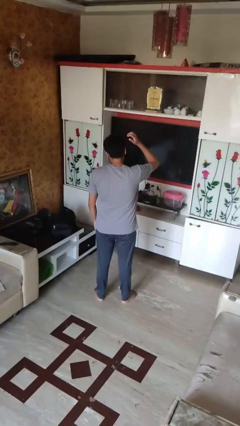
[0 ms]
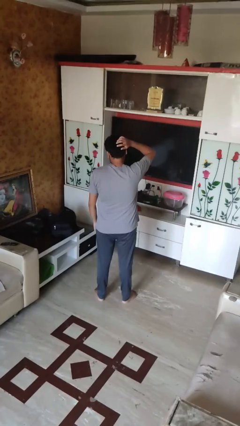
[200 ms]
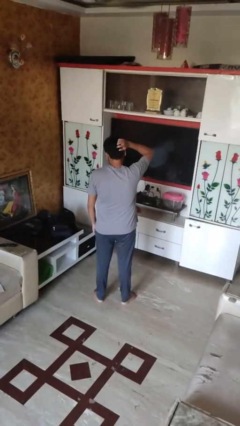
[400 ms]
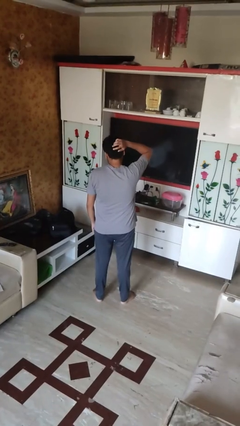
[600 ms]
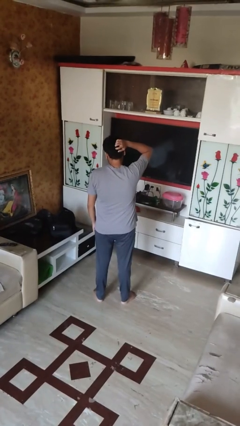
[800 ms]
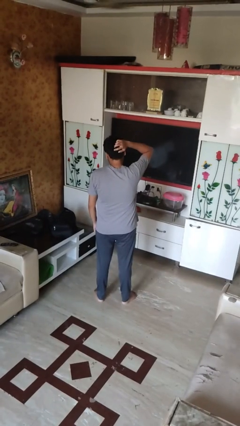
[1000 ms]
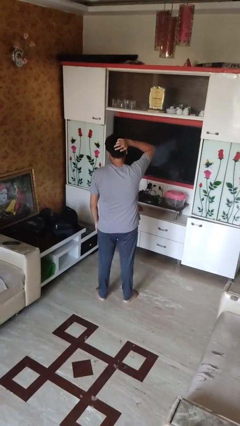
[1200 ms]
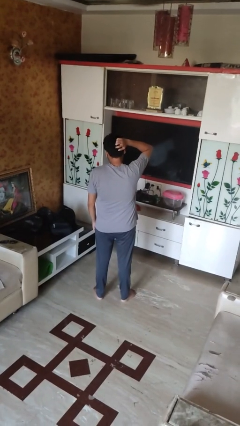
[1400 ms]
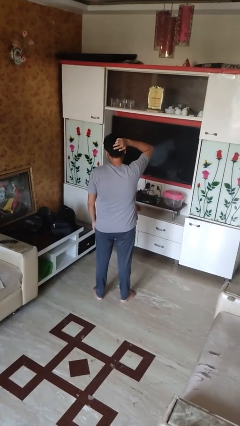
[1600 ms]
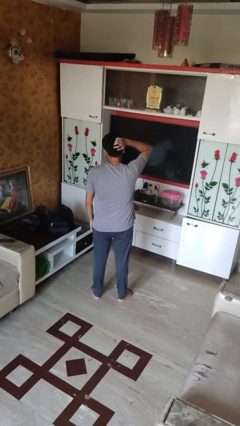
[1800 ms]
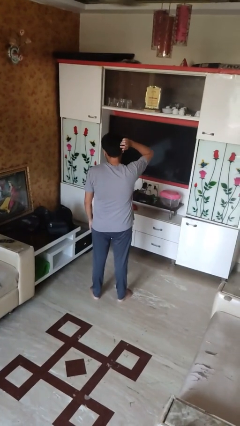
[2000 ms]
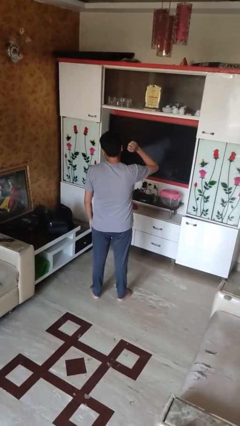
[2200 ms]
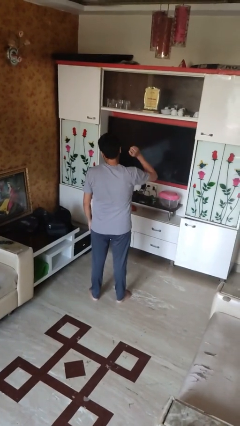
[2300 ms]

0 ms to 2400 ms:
person scratches face

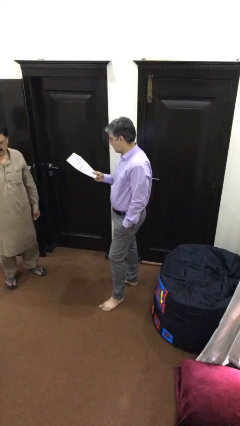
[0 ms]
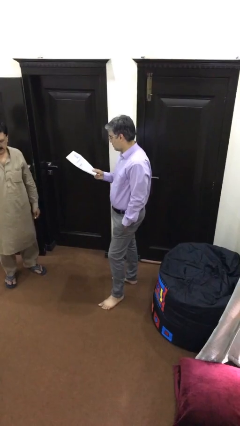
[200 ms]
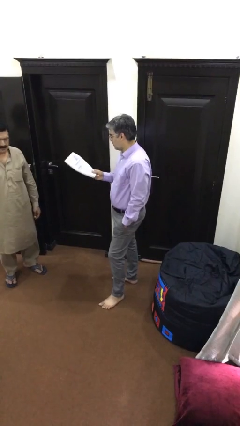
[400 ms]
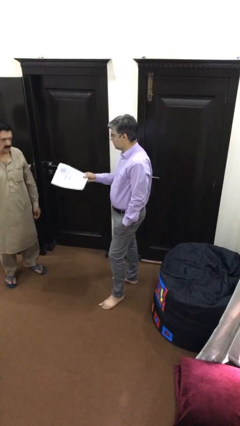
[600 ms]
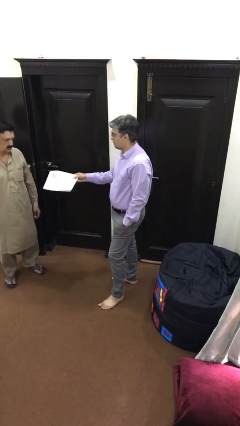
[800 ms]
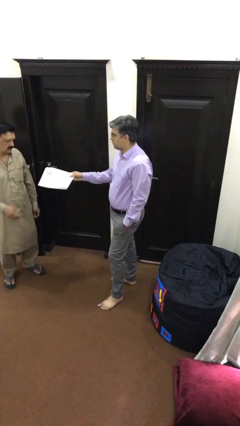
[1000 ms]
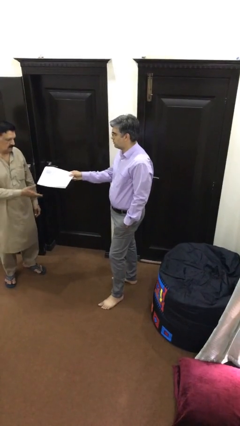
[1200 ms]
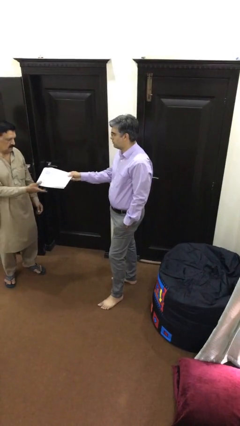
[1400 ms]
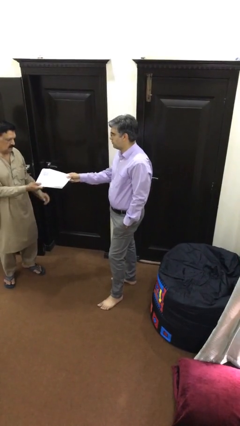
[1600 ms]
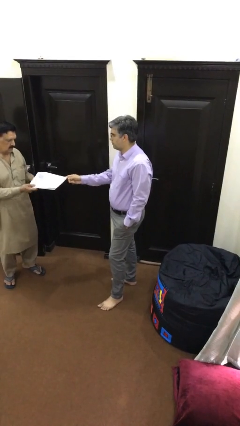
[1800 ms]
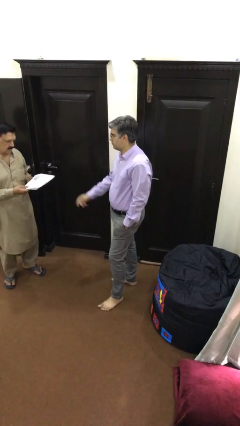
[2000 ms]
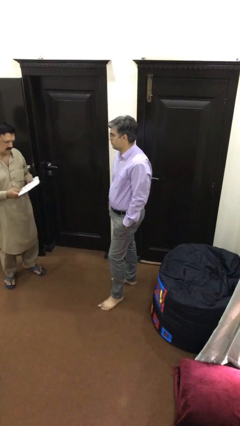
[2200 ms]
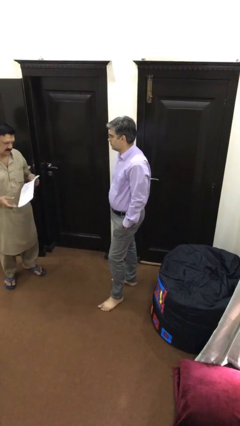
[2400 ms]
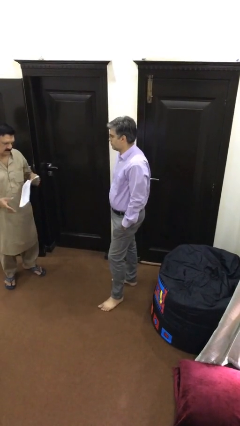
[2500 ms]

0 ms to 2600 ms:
person transfers object to person

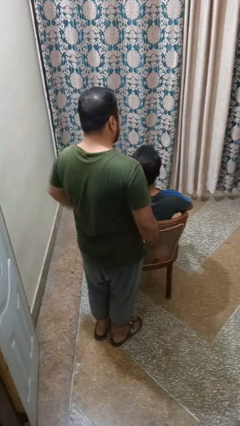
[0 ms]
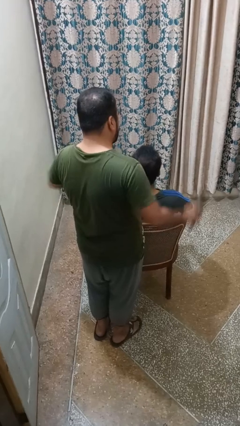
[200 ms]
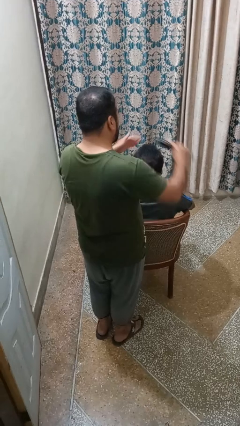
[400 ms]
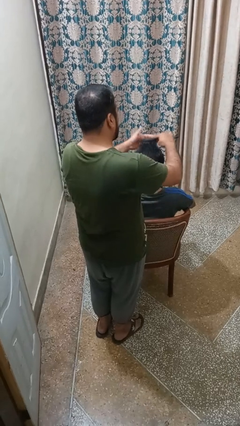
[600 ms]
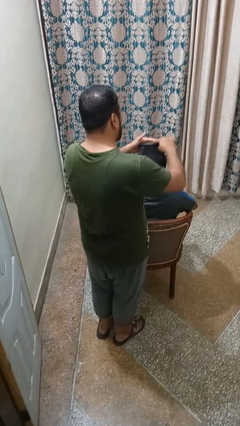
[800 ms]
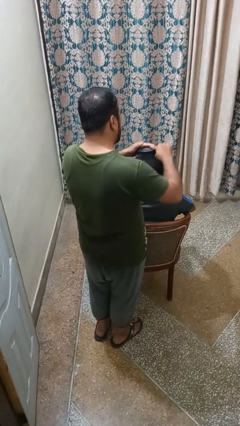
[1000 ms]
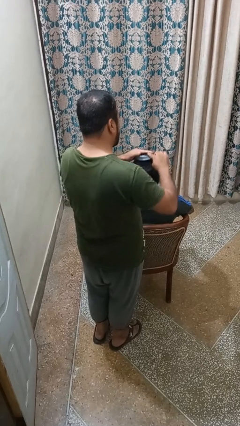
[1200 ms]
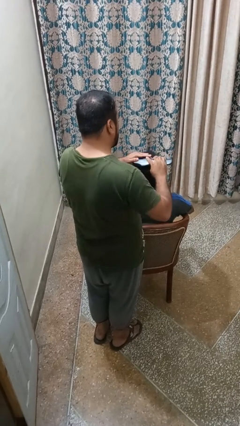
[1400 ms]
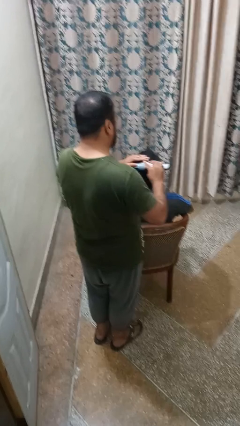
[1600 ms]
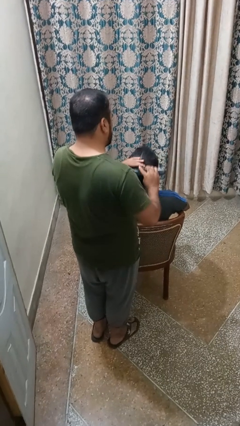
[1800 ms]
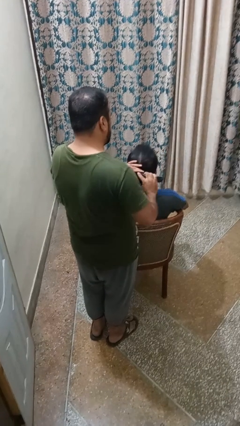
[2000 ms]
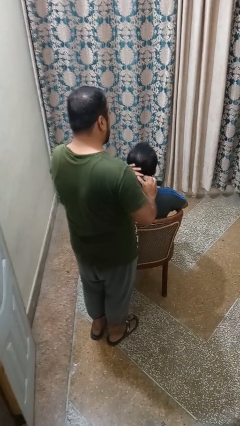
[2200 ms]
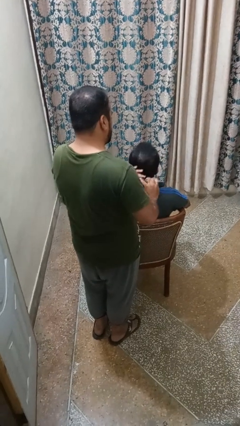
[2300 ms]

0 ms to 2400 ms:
person brushes hair of person

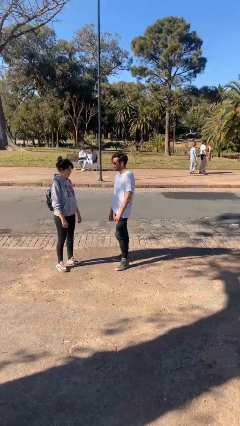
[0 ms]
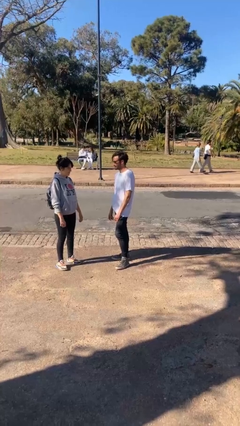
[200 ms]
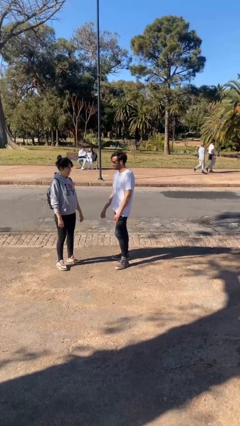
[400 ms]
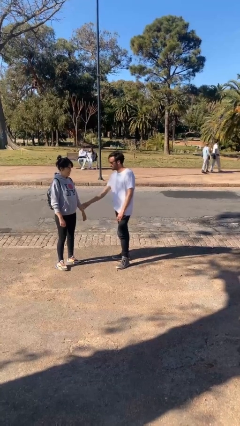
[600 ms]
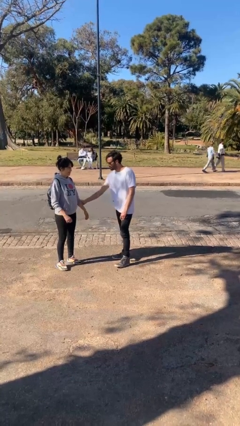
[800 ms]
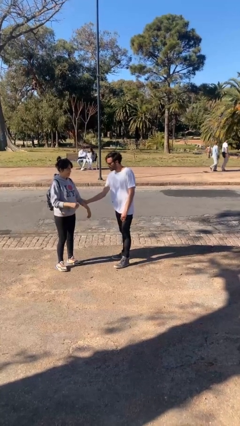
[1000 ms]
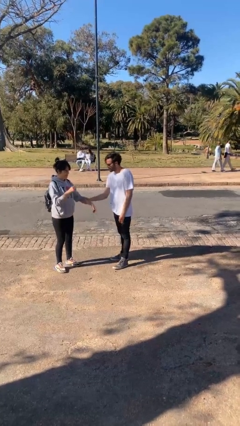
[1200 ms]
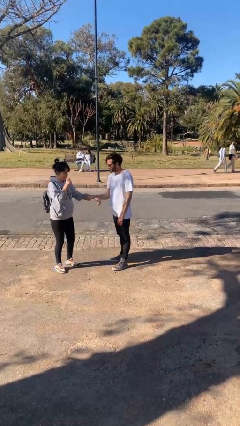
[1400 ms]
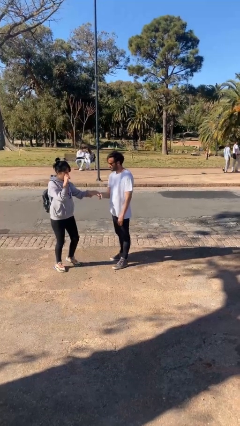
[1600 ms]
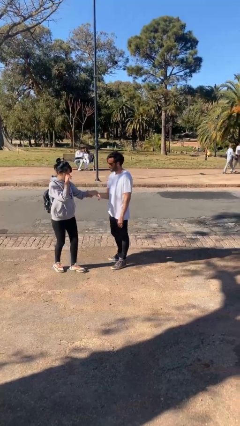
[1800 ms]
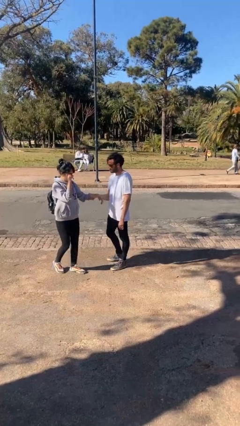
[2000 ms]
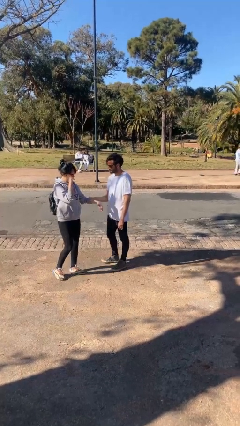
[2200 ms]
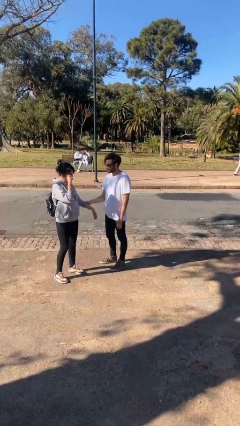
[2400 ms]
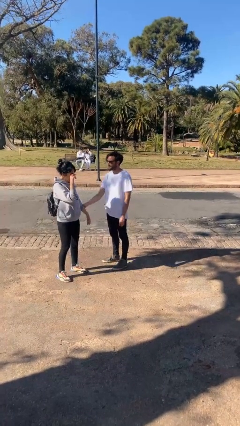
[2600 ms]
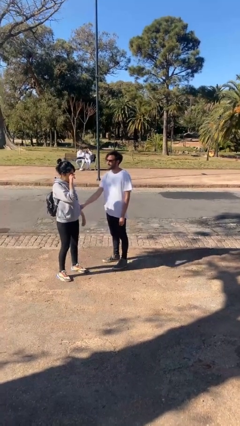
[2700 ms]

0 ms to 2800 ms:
person grabs person by forearm

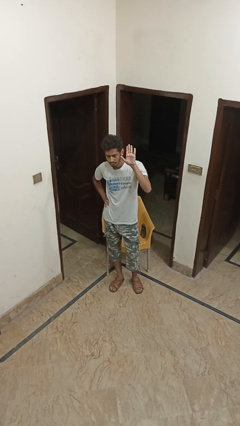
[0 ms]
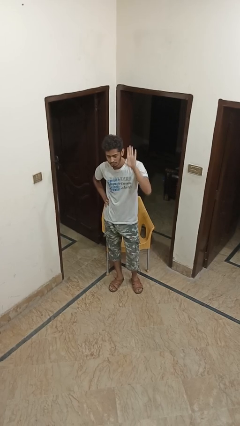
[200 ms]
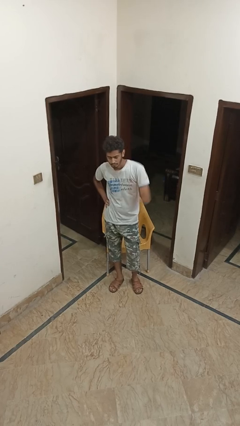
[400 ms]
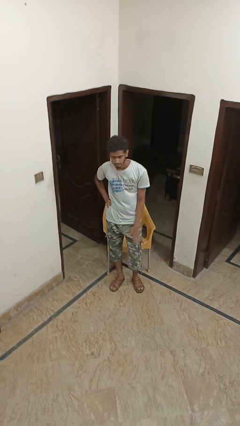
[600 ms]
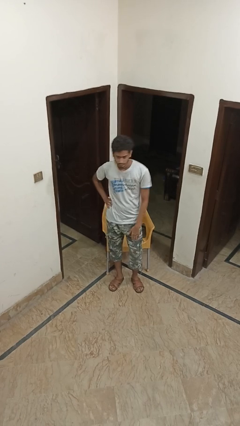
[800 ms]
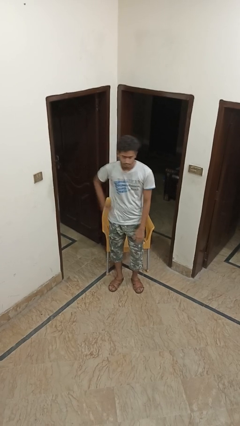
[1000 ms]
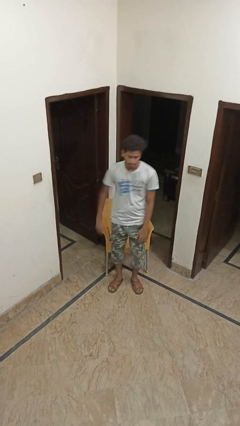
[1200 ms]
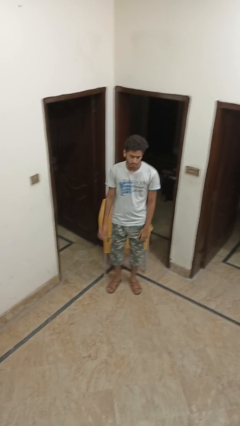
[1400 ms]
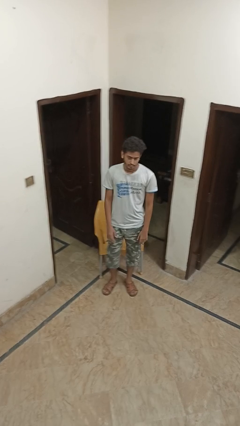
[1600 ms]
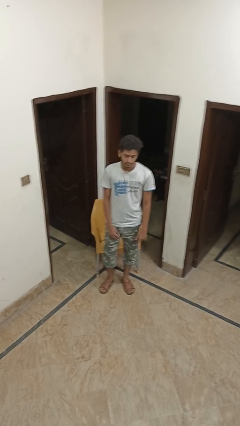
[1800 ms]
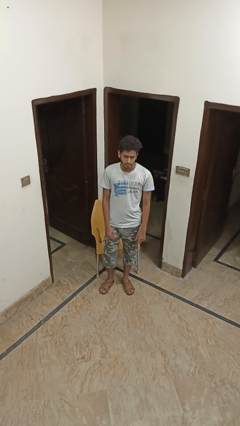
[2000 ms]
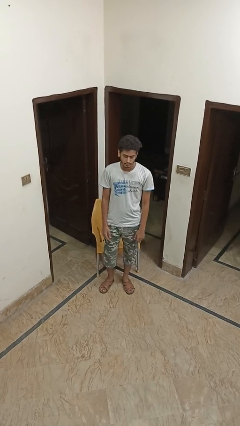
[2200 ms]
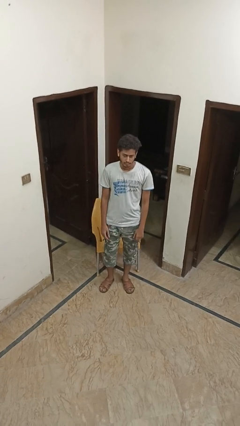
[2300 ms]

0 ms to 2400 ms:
person gestures lower hand

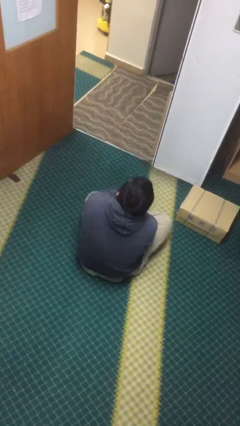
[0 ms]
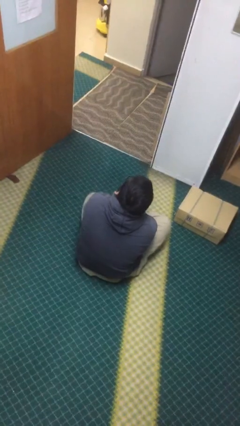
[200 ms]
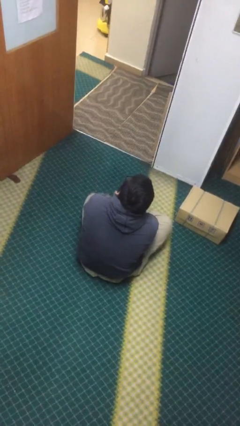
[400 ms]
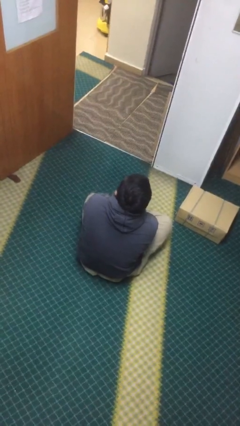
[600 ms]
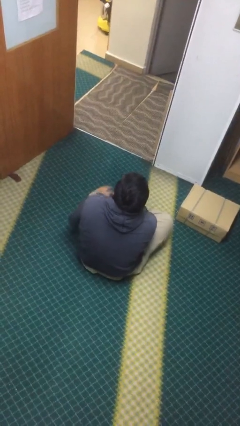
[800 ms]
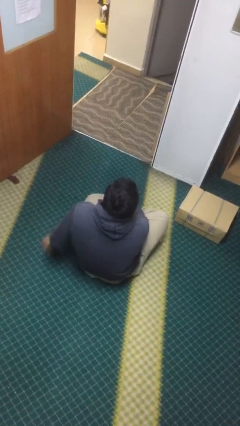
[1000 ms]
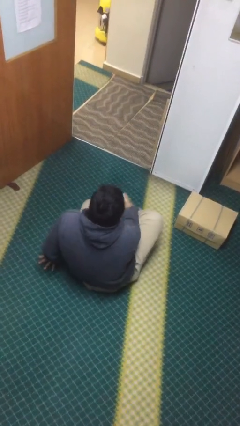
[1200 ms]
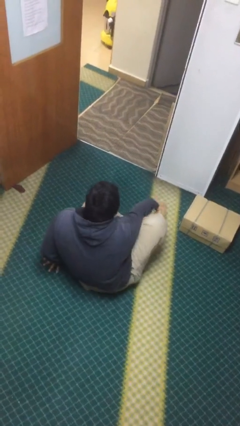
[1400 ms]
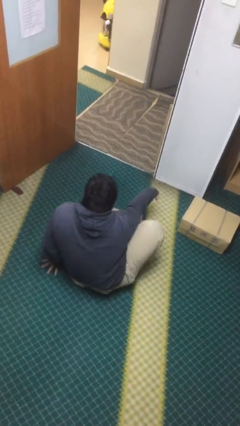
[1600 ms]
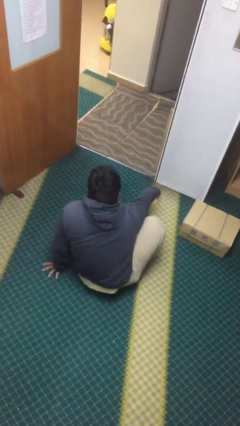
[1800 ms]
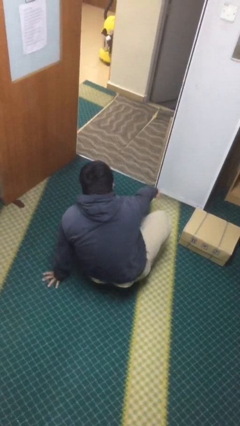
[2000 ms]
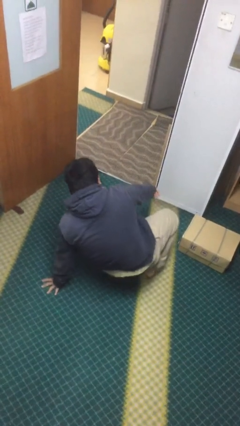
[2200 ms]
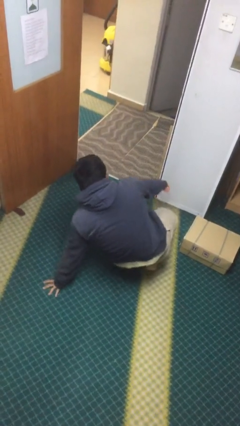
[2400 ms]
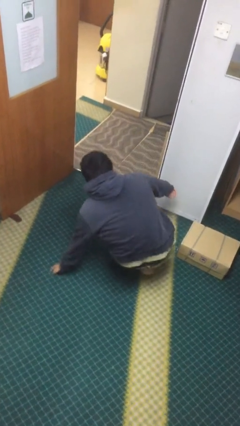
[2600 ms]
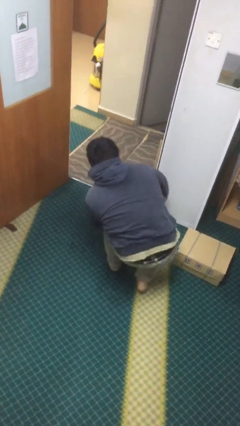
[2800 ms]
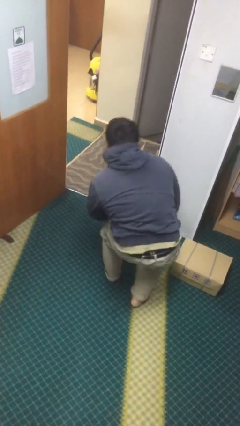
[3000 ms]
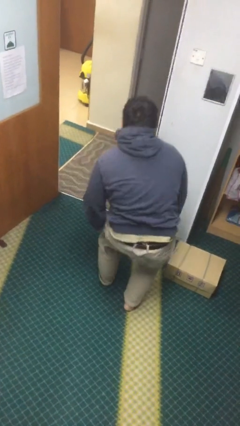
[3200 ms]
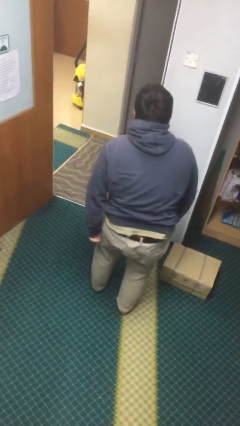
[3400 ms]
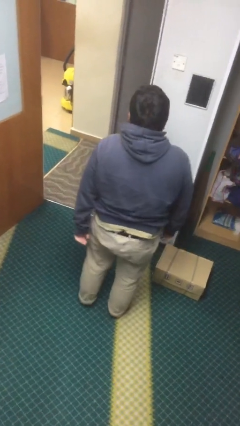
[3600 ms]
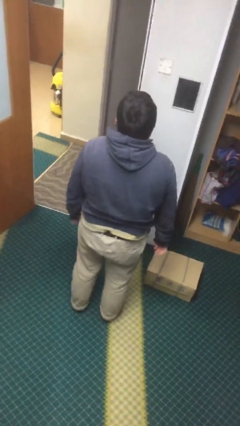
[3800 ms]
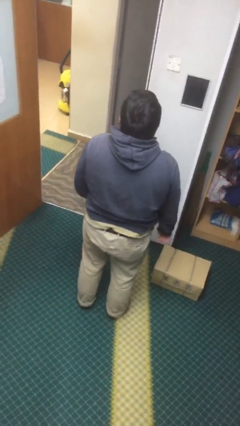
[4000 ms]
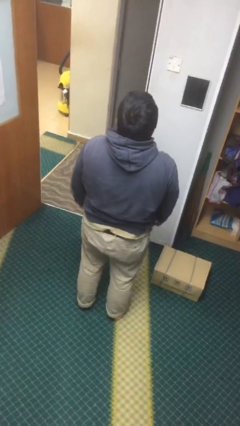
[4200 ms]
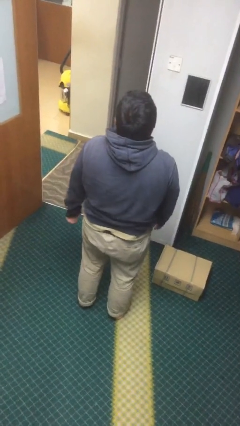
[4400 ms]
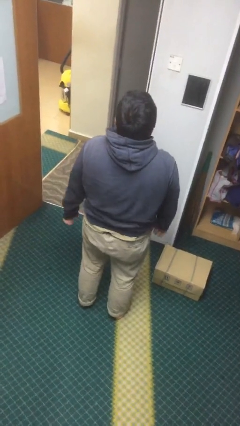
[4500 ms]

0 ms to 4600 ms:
person stands up from floor

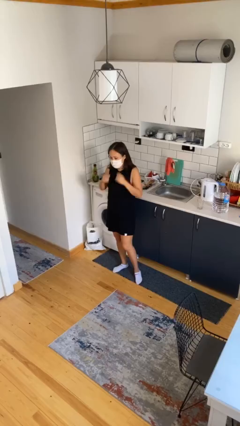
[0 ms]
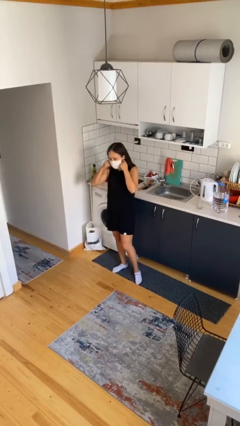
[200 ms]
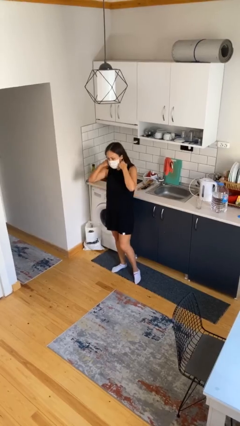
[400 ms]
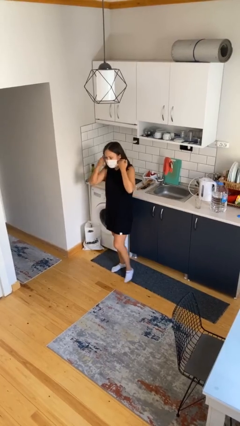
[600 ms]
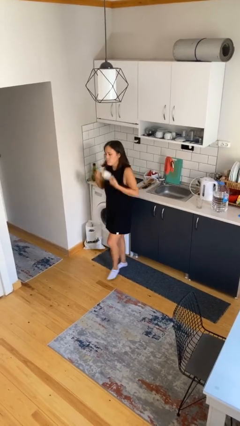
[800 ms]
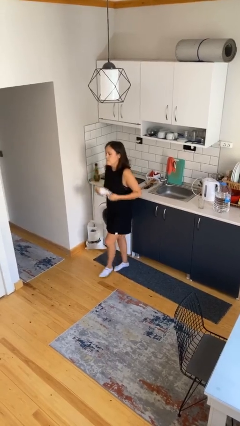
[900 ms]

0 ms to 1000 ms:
person takes off facemask
